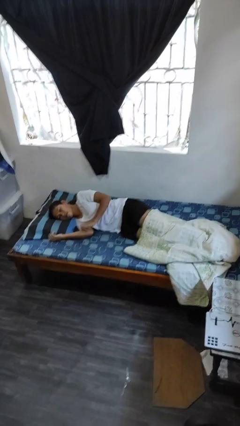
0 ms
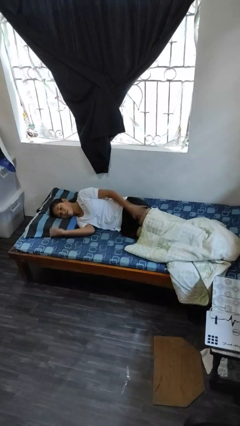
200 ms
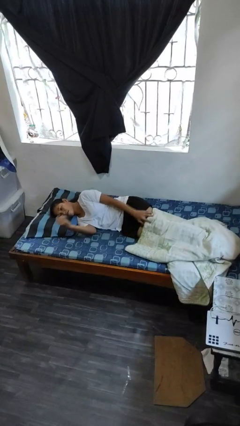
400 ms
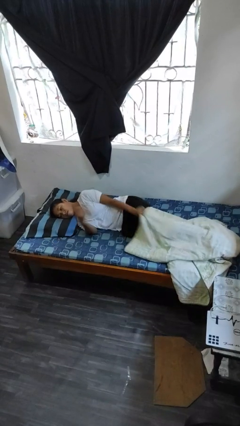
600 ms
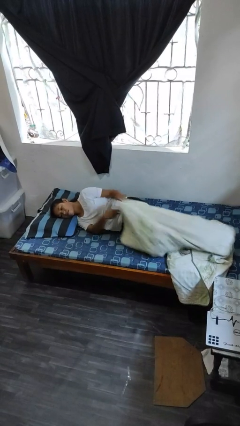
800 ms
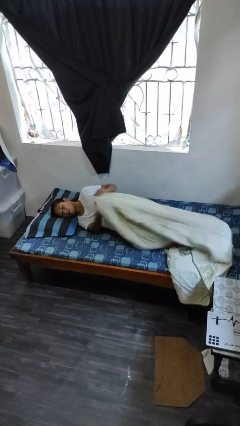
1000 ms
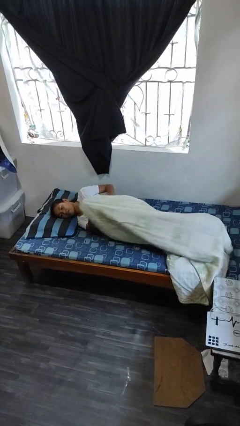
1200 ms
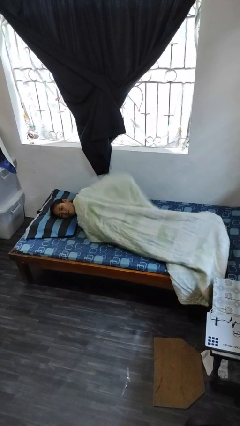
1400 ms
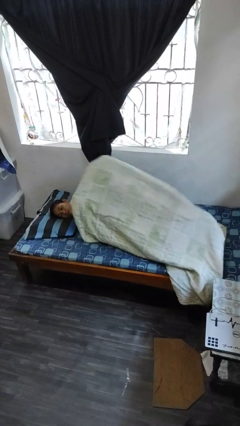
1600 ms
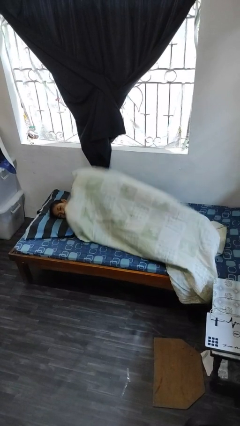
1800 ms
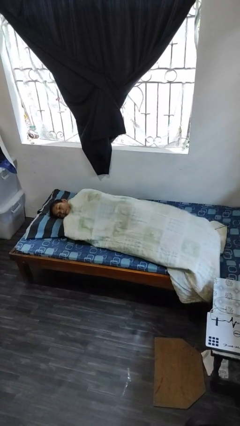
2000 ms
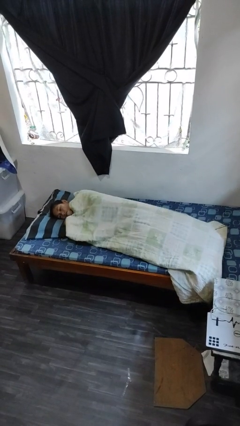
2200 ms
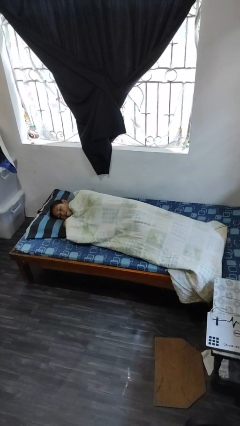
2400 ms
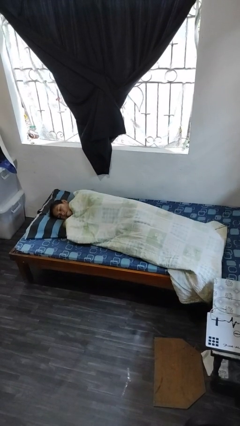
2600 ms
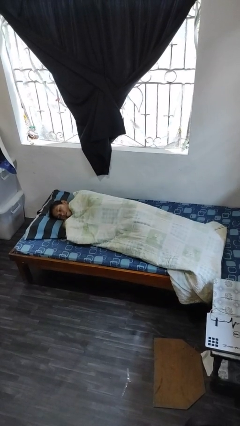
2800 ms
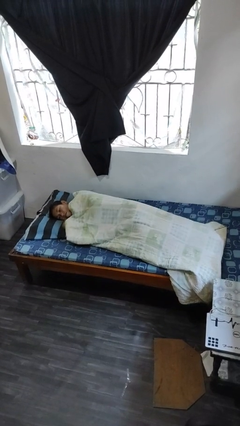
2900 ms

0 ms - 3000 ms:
person covers with bedsheets

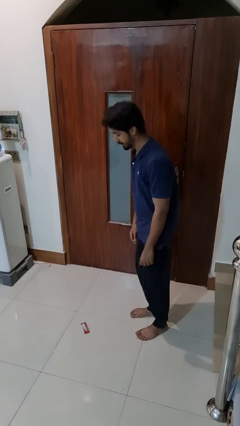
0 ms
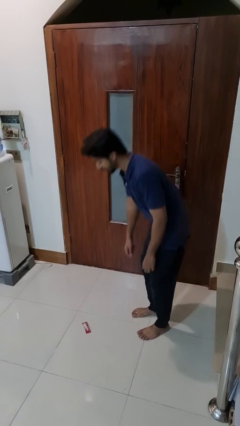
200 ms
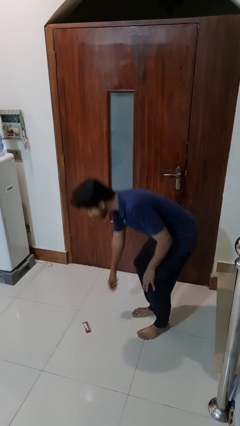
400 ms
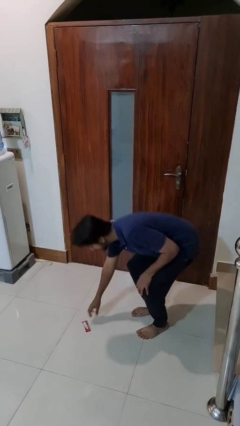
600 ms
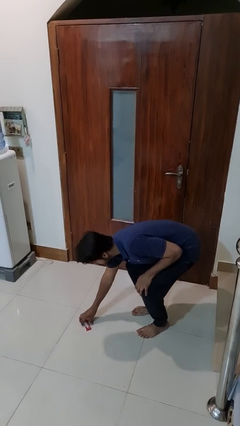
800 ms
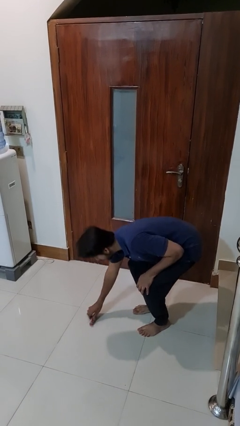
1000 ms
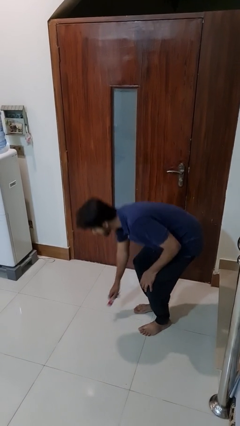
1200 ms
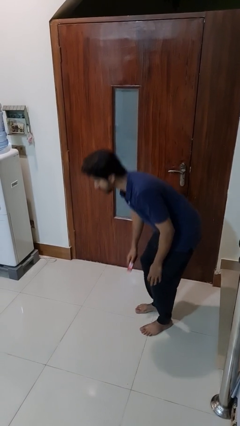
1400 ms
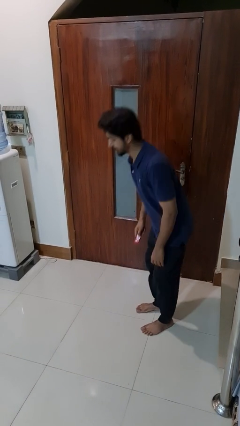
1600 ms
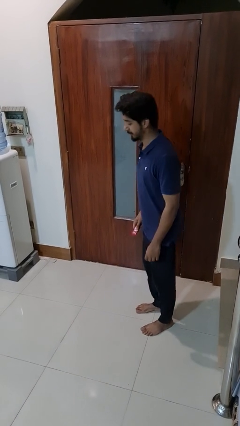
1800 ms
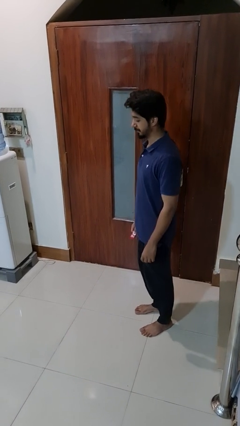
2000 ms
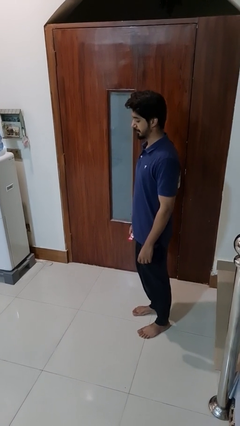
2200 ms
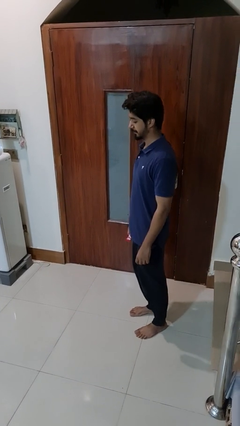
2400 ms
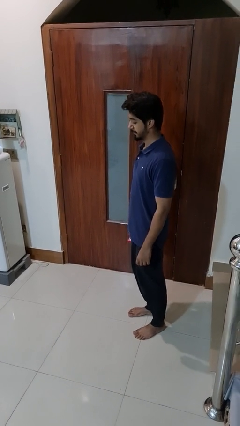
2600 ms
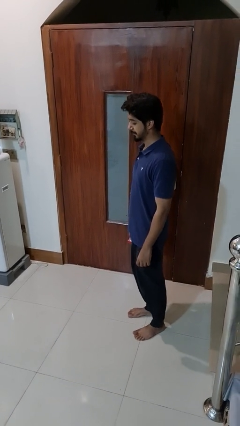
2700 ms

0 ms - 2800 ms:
person picks up object from floor

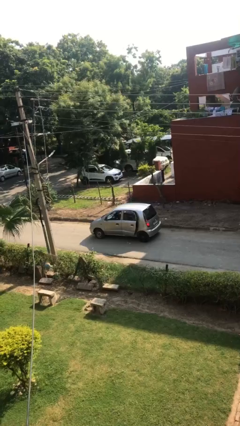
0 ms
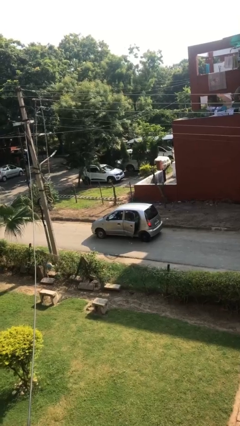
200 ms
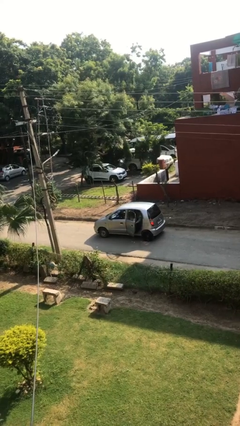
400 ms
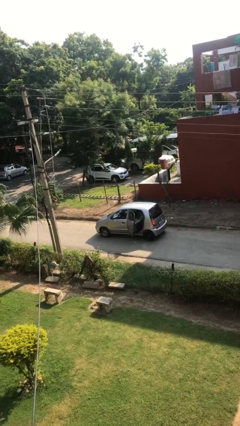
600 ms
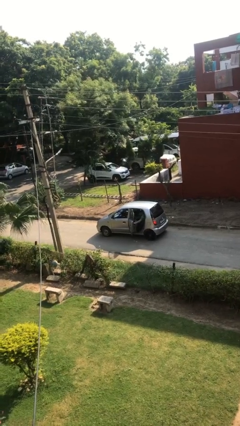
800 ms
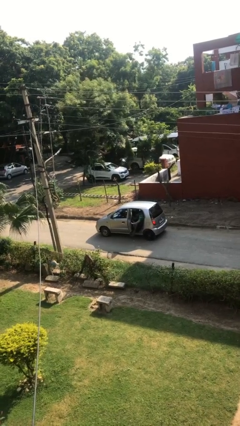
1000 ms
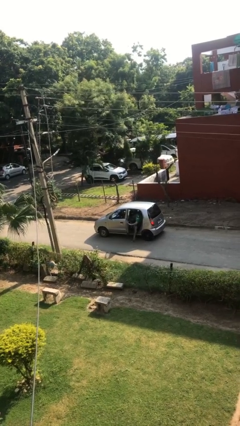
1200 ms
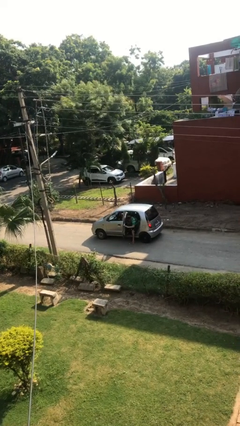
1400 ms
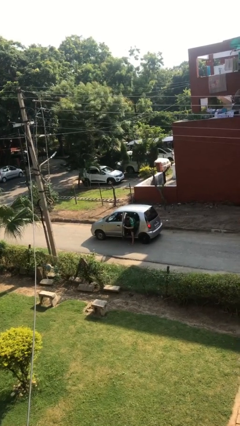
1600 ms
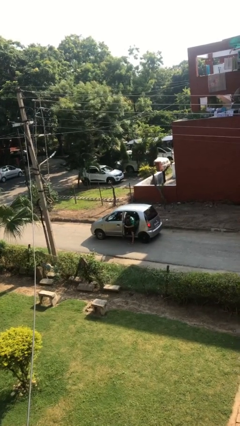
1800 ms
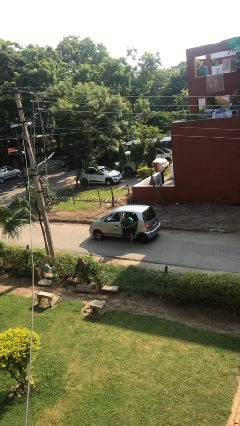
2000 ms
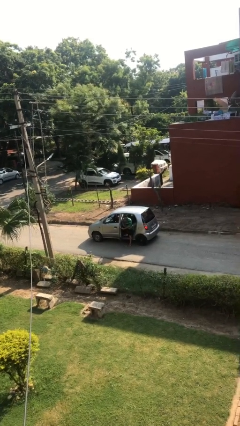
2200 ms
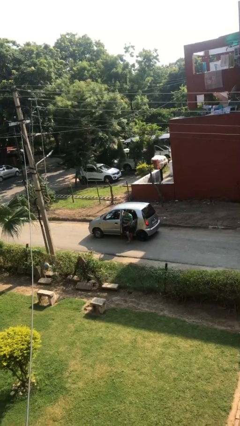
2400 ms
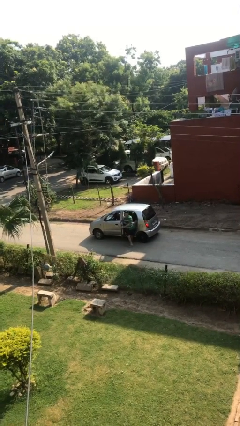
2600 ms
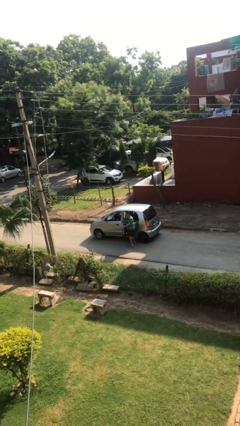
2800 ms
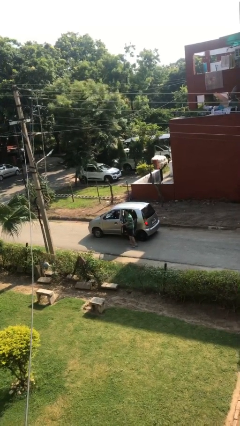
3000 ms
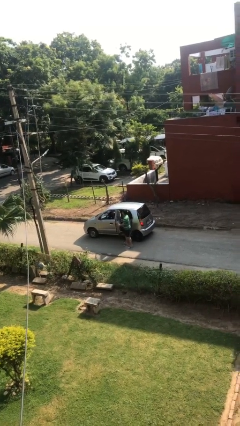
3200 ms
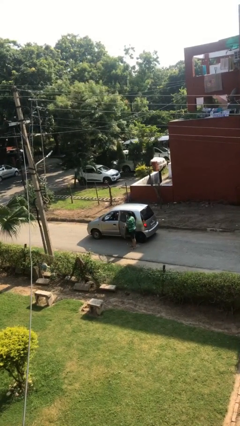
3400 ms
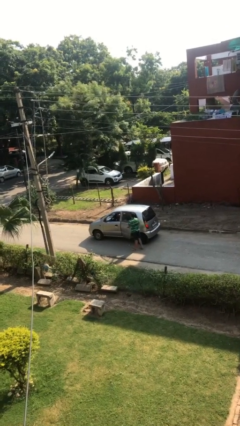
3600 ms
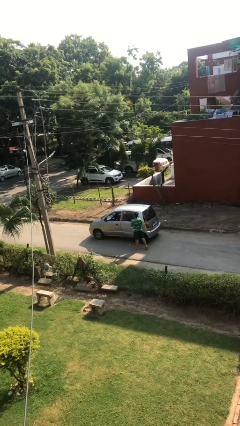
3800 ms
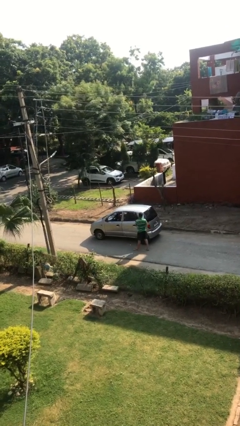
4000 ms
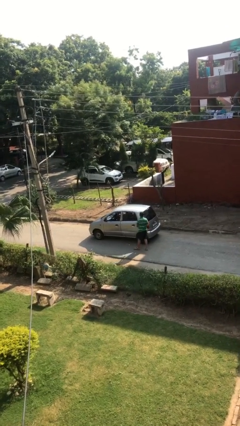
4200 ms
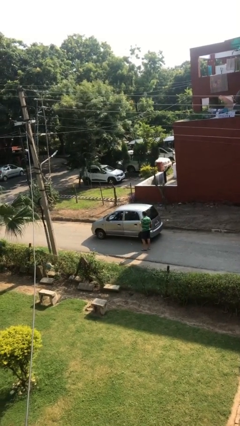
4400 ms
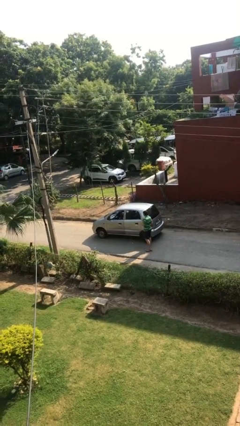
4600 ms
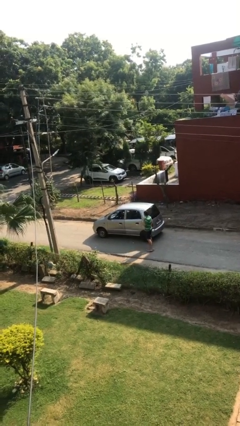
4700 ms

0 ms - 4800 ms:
car drops off person

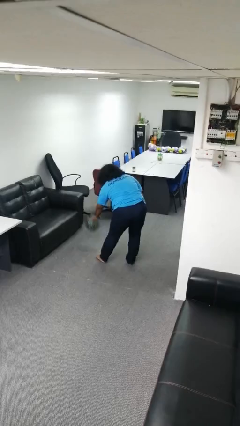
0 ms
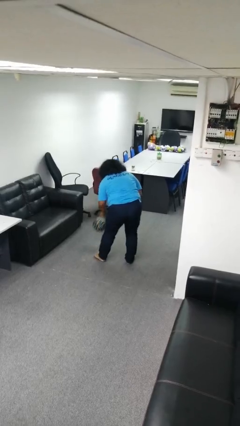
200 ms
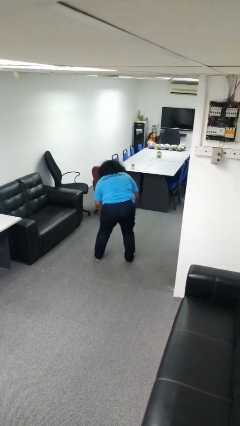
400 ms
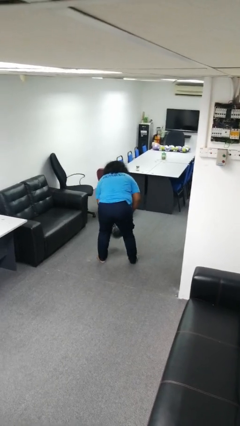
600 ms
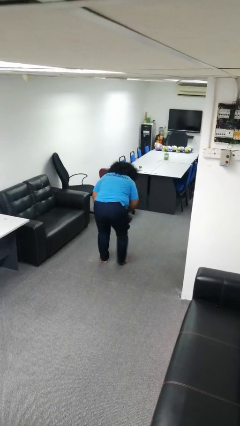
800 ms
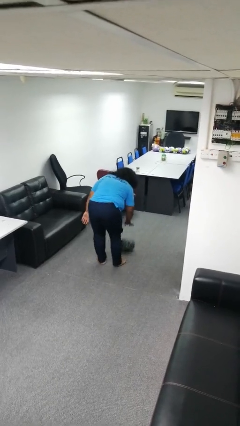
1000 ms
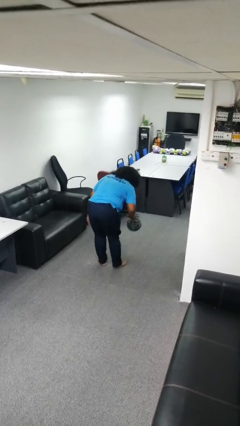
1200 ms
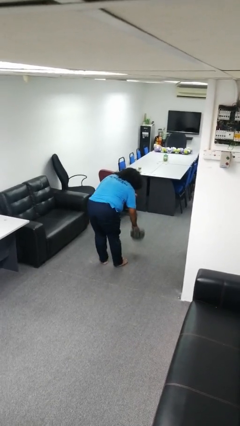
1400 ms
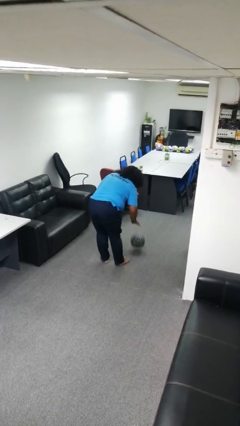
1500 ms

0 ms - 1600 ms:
person bounces ball on floor

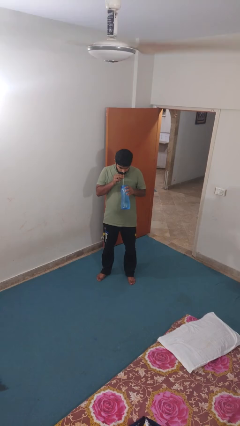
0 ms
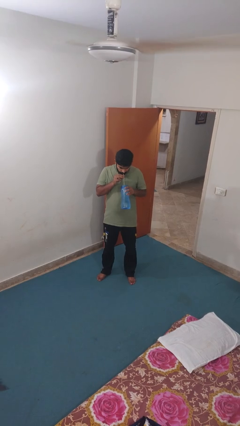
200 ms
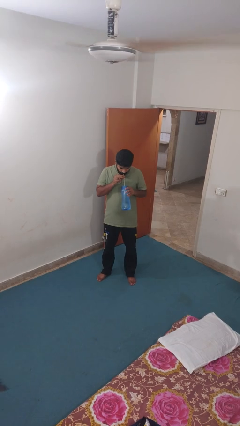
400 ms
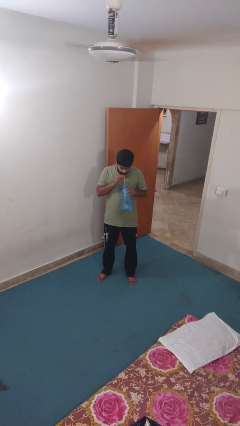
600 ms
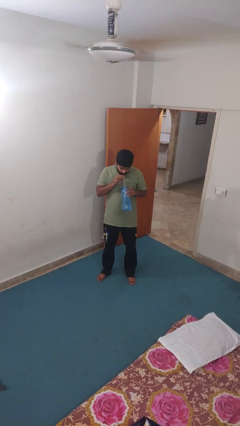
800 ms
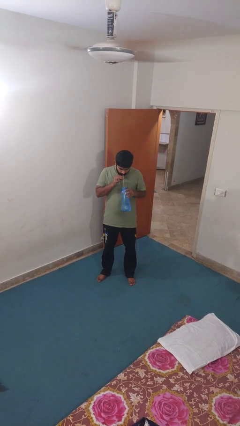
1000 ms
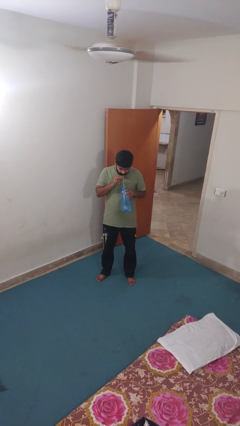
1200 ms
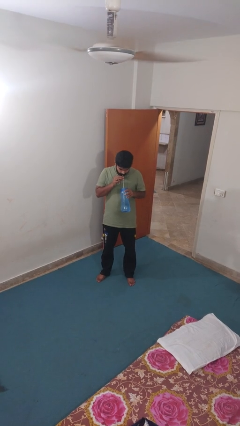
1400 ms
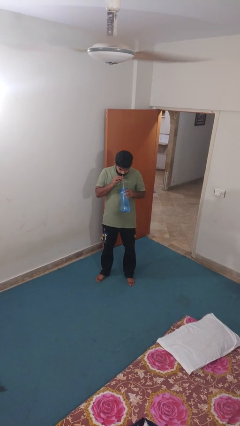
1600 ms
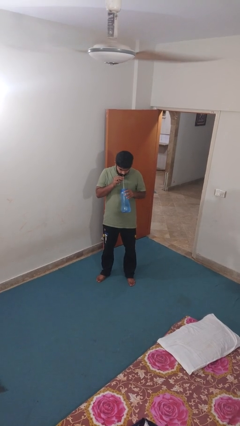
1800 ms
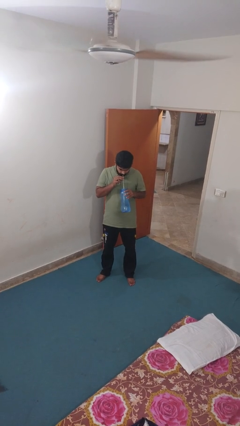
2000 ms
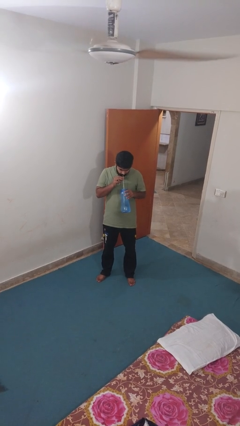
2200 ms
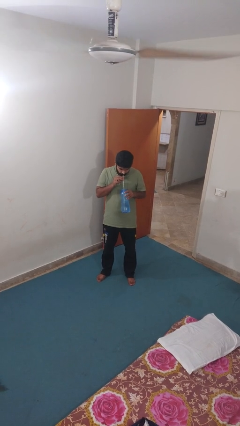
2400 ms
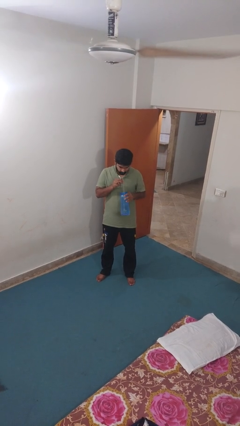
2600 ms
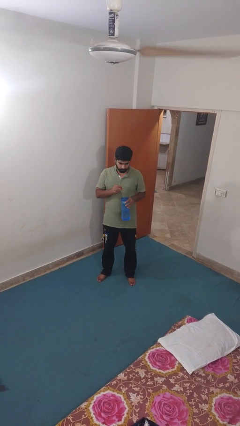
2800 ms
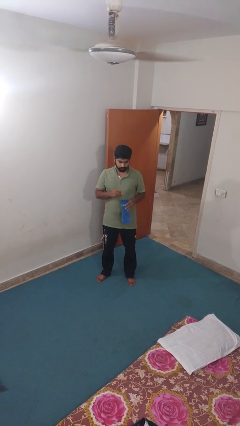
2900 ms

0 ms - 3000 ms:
person drinks from straw

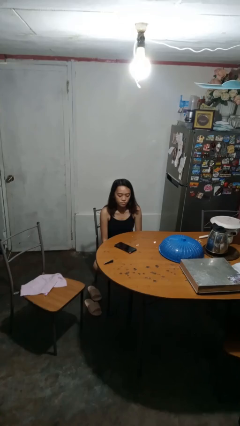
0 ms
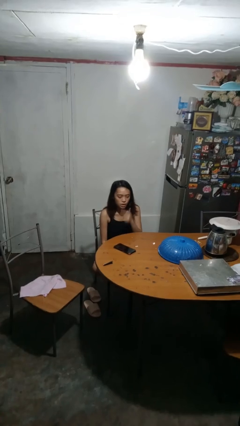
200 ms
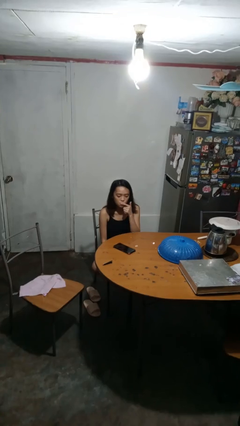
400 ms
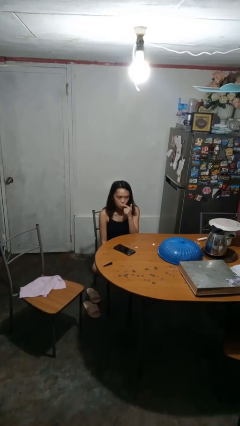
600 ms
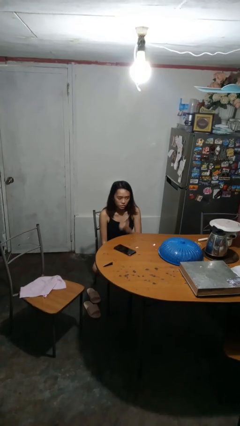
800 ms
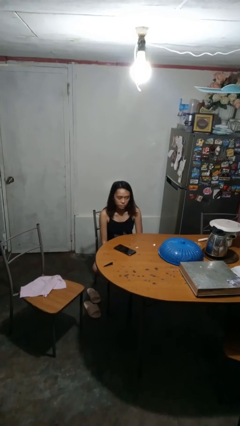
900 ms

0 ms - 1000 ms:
person licks fingers

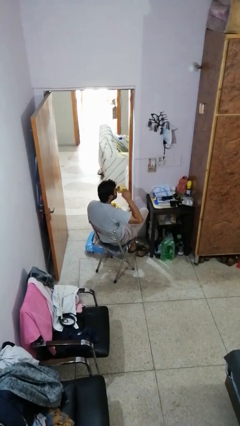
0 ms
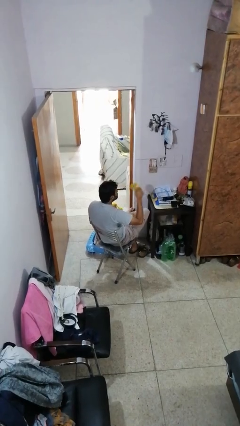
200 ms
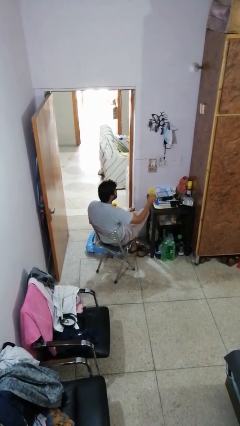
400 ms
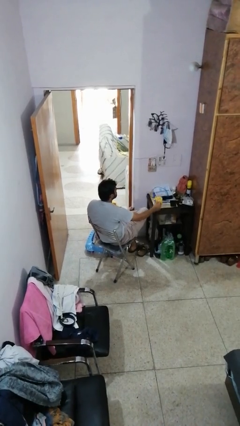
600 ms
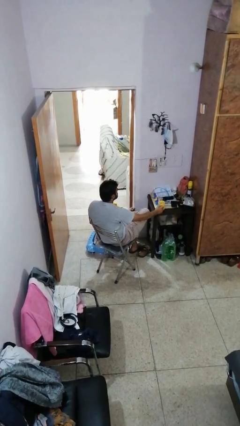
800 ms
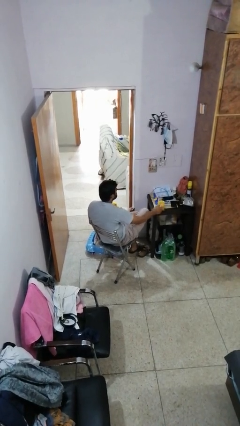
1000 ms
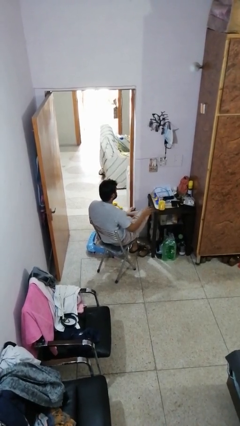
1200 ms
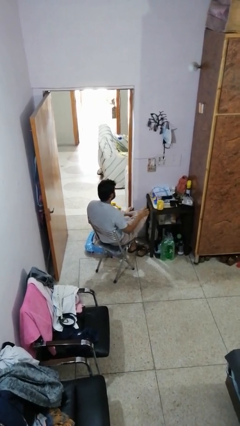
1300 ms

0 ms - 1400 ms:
person puts down object on table
